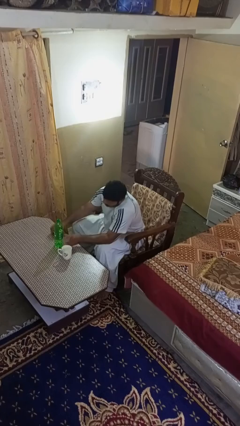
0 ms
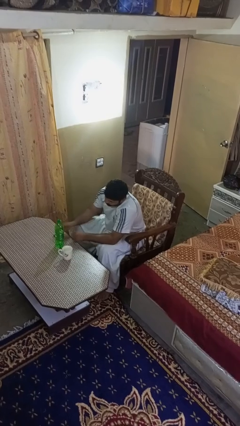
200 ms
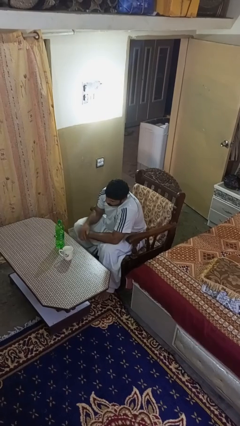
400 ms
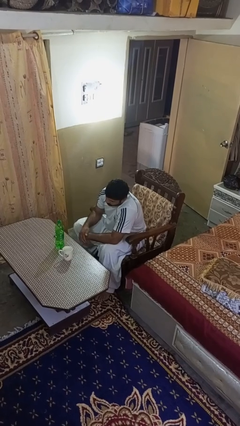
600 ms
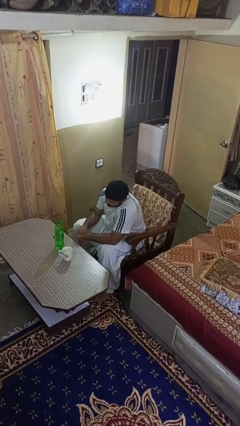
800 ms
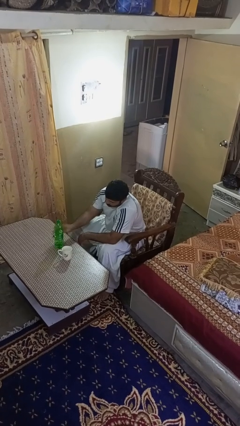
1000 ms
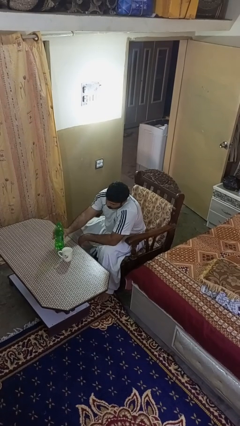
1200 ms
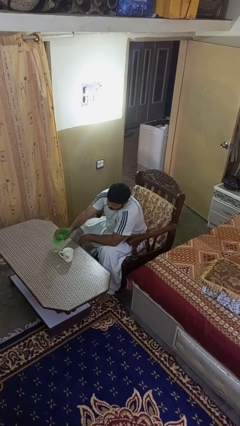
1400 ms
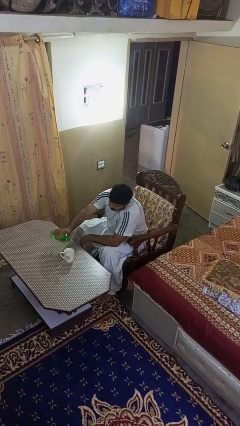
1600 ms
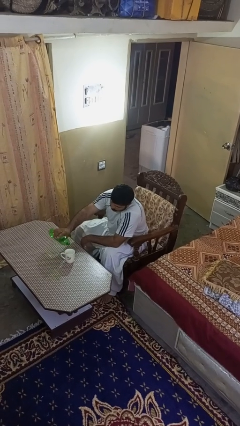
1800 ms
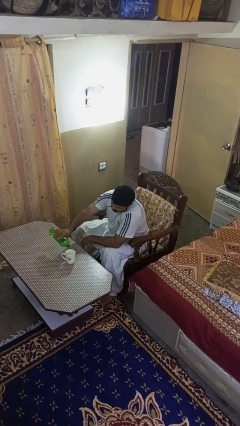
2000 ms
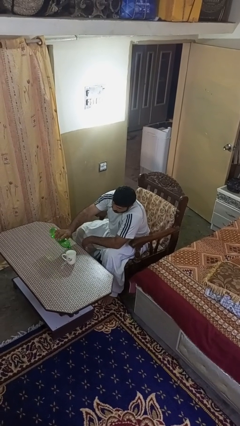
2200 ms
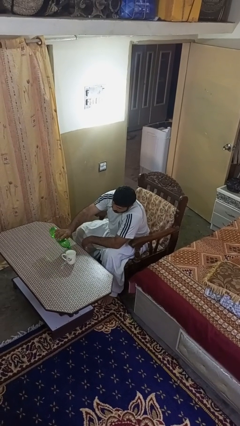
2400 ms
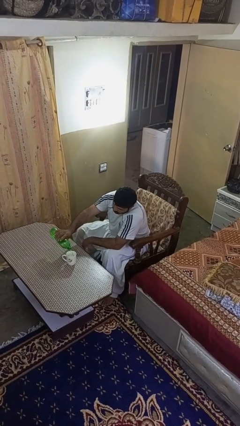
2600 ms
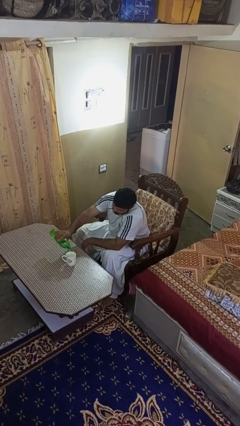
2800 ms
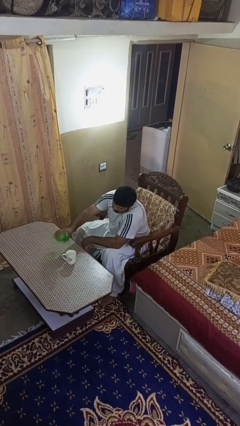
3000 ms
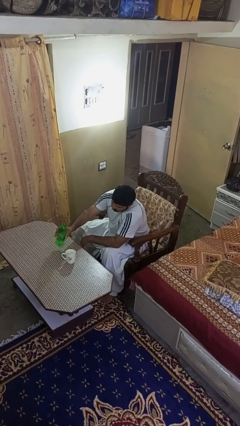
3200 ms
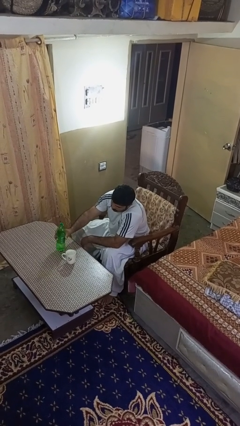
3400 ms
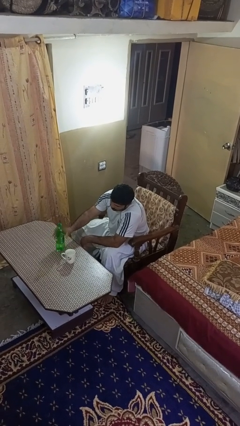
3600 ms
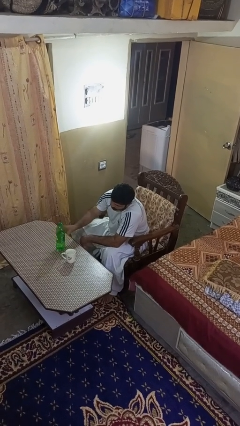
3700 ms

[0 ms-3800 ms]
person pours liquid into cup

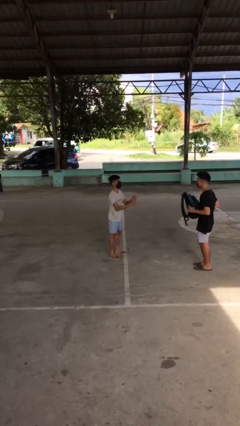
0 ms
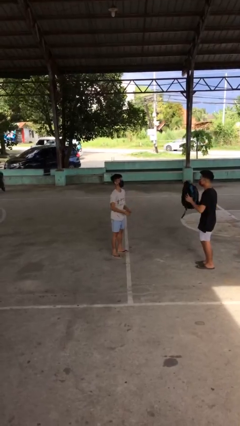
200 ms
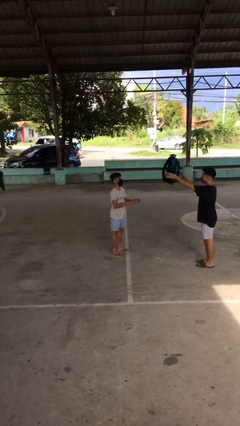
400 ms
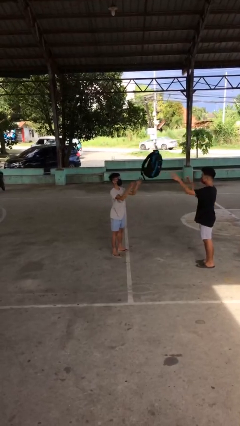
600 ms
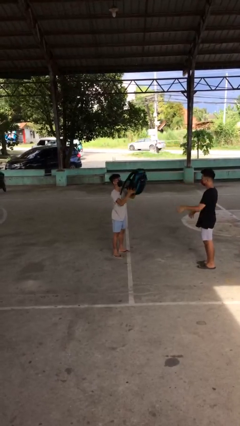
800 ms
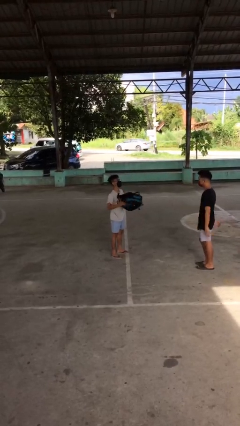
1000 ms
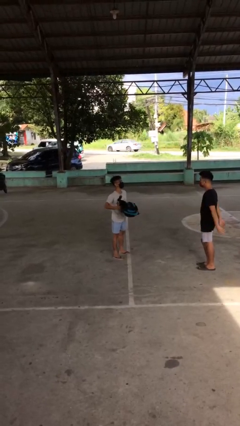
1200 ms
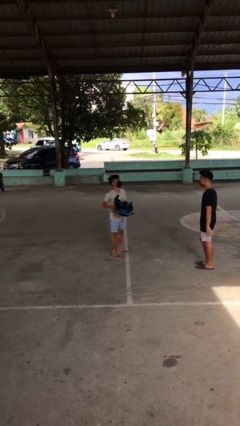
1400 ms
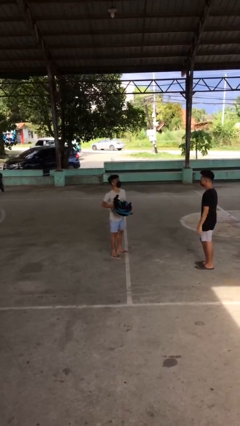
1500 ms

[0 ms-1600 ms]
person catches object from person

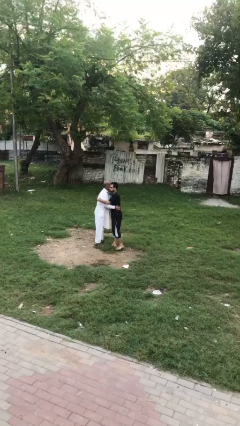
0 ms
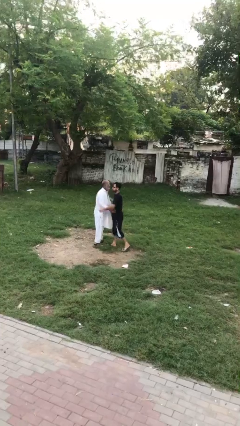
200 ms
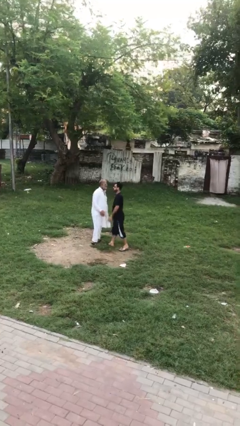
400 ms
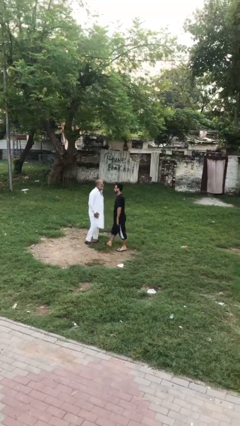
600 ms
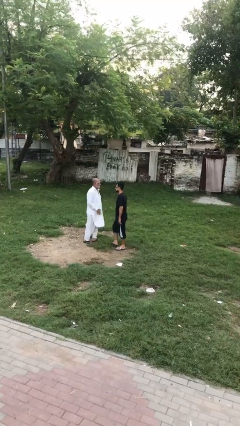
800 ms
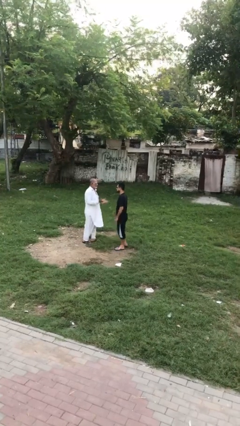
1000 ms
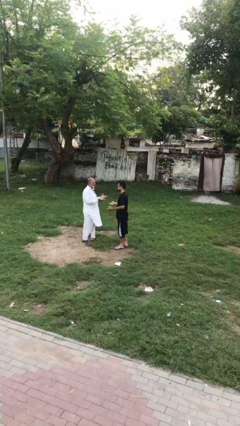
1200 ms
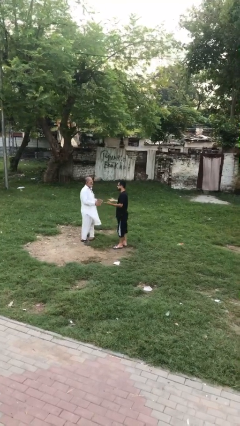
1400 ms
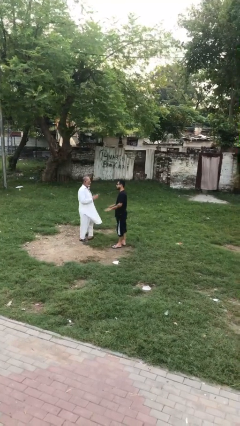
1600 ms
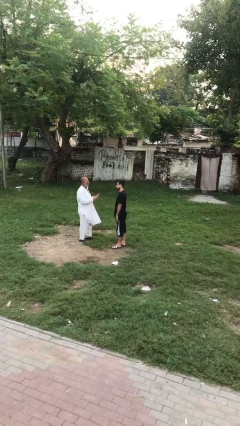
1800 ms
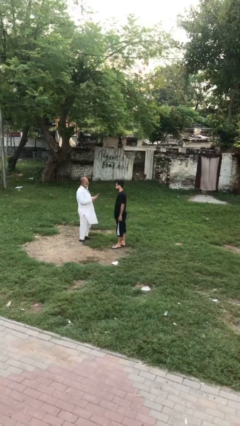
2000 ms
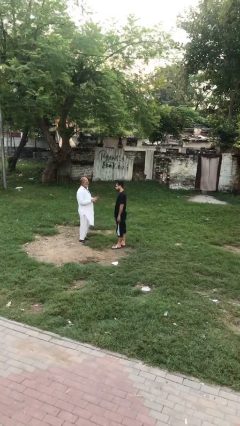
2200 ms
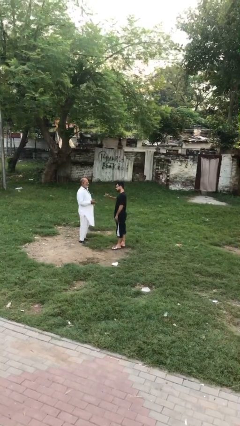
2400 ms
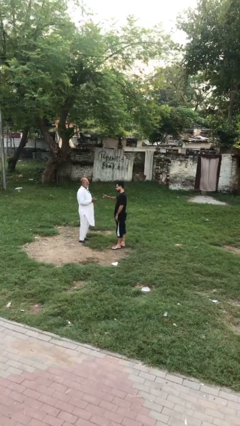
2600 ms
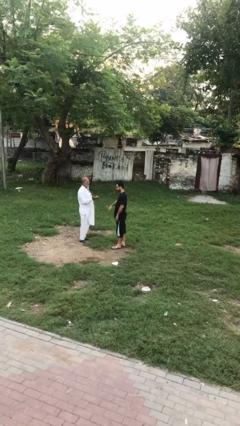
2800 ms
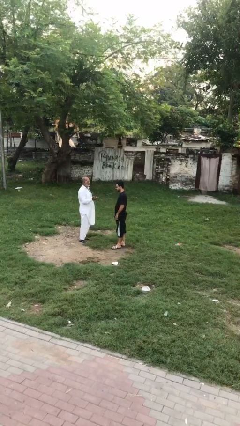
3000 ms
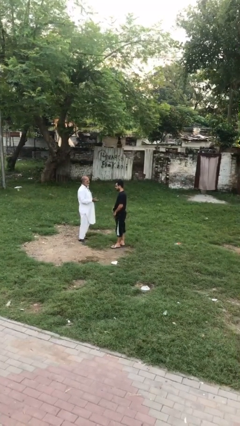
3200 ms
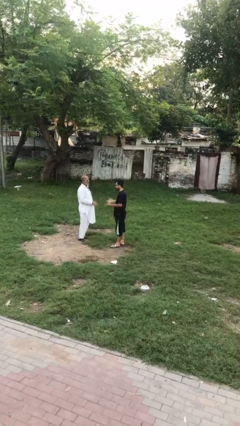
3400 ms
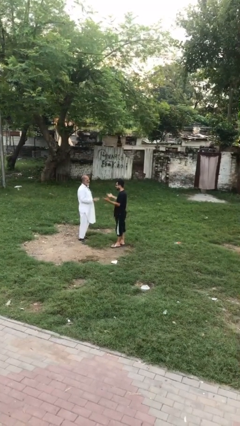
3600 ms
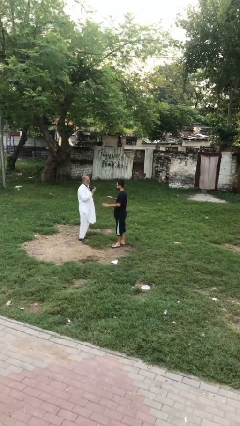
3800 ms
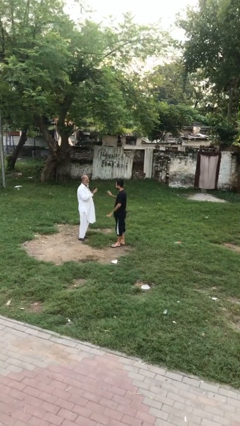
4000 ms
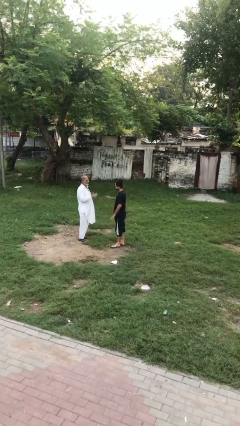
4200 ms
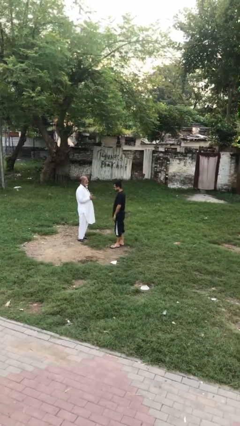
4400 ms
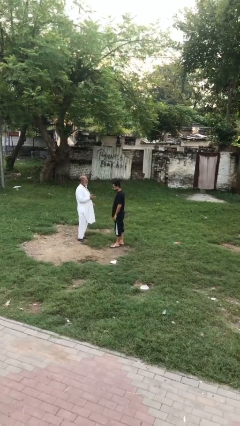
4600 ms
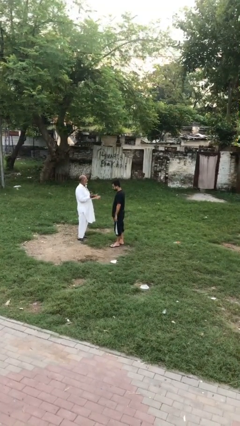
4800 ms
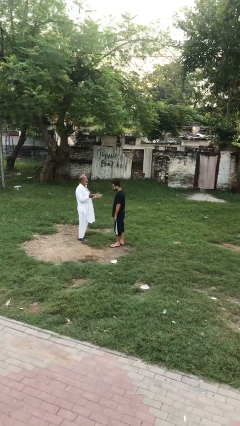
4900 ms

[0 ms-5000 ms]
person talks to person

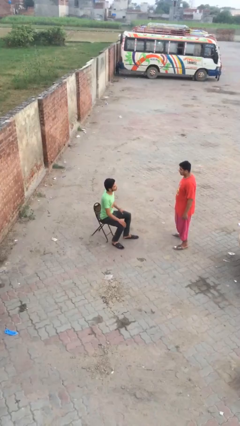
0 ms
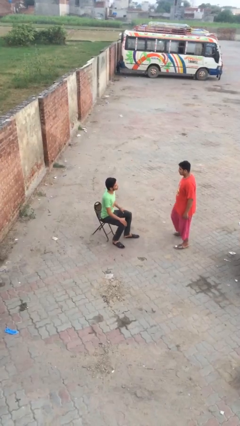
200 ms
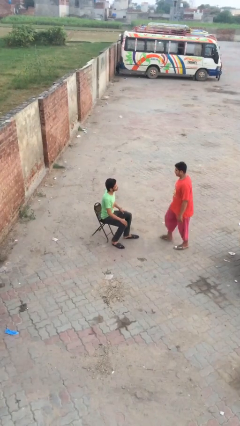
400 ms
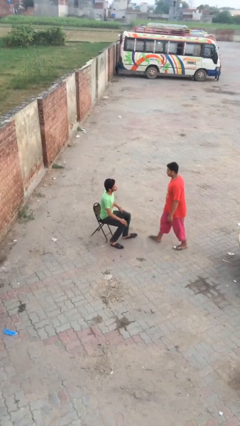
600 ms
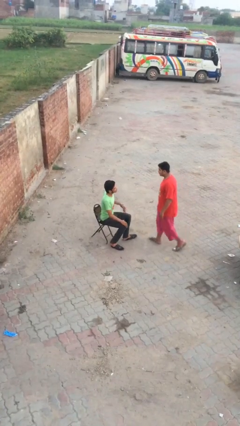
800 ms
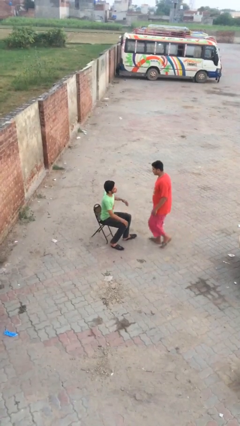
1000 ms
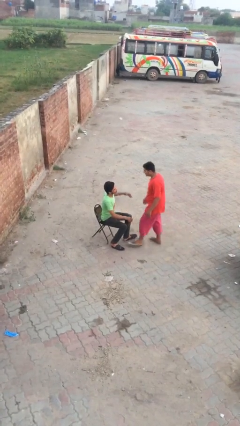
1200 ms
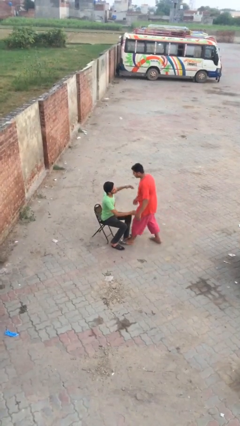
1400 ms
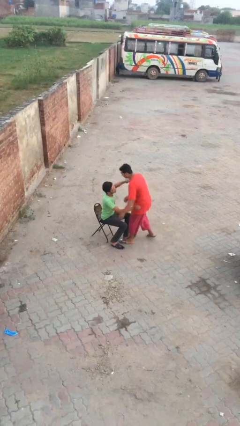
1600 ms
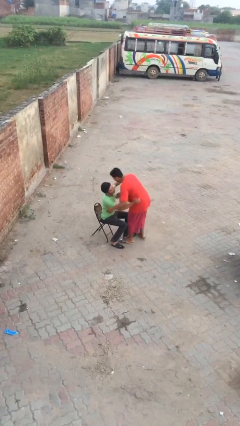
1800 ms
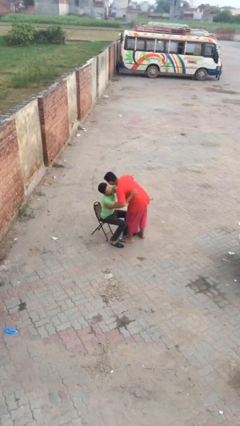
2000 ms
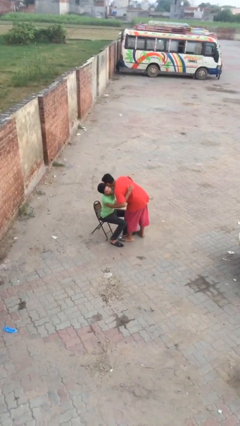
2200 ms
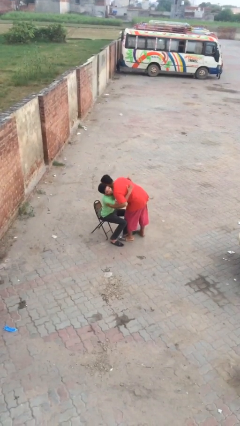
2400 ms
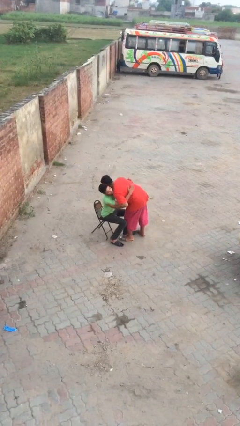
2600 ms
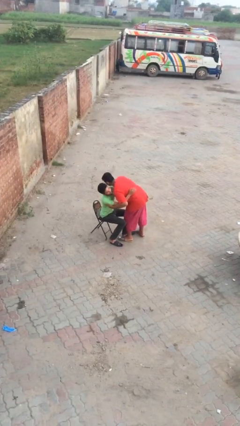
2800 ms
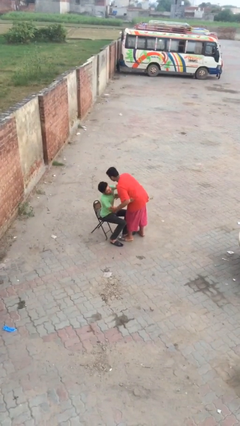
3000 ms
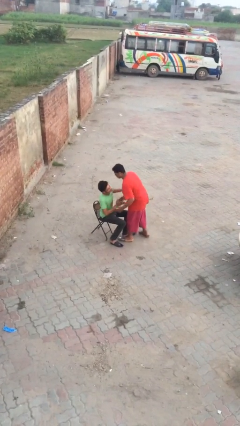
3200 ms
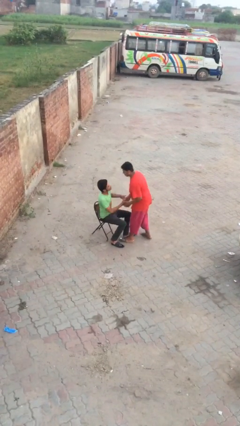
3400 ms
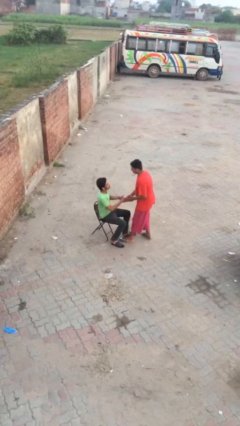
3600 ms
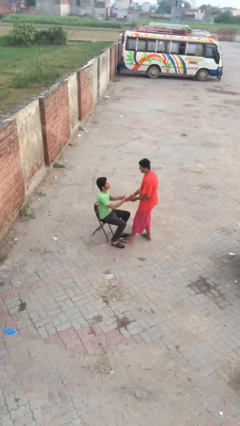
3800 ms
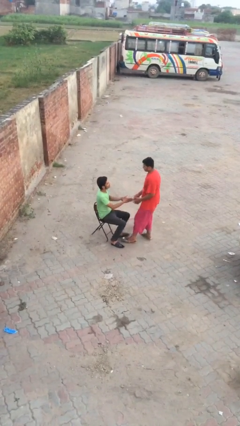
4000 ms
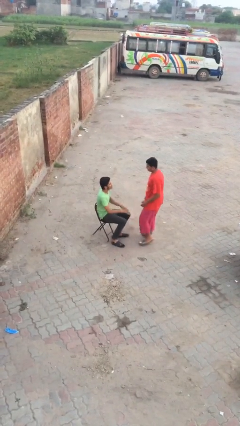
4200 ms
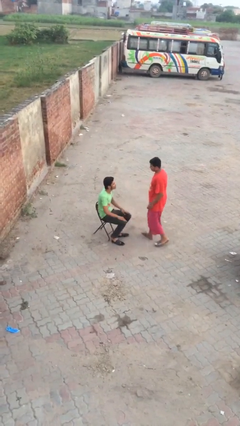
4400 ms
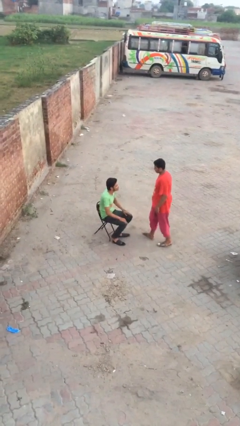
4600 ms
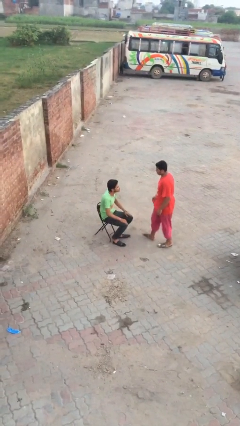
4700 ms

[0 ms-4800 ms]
person embraces person

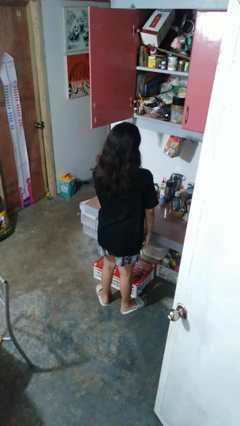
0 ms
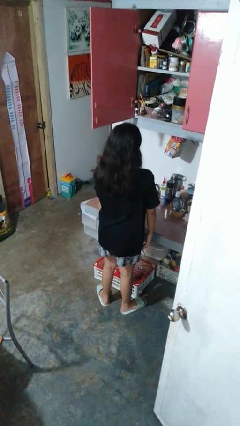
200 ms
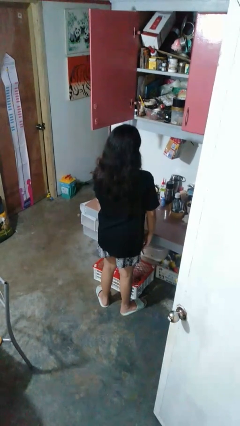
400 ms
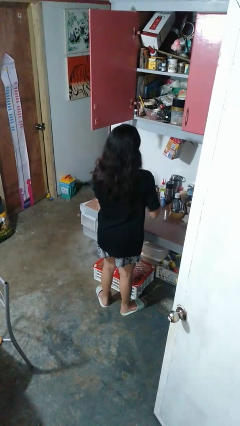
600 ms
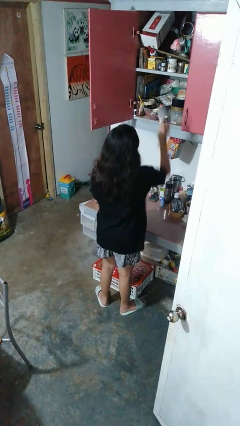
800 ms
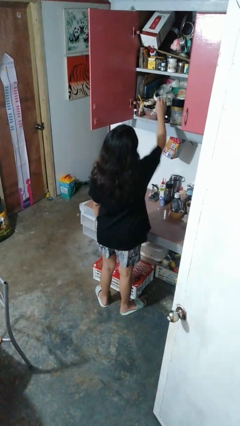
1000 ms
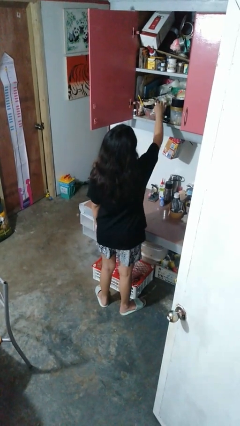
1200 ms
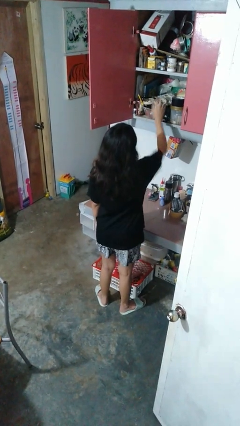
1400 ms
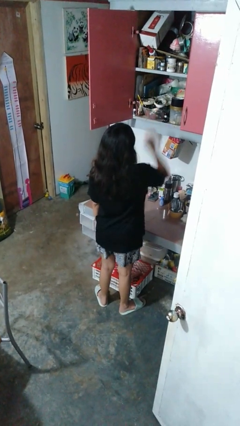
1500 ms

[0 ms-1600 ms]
person puts object in cabinet

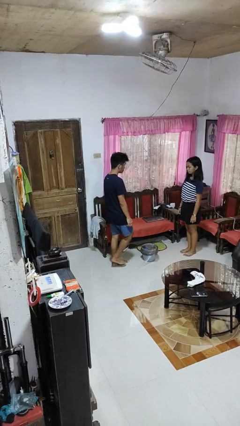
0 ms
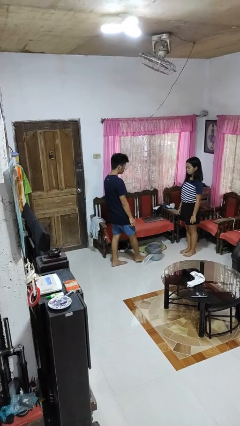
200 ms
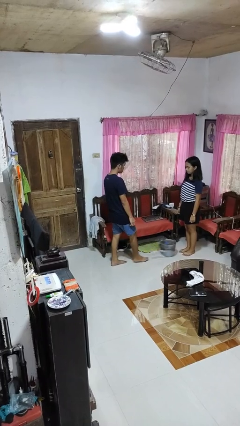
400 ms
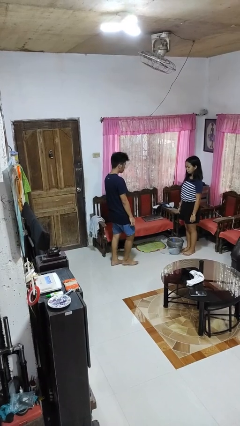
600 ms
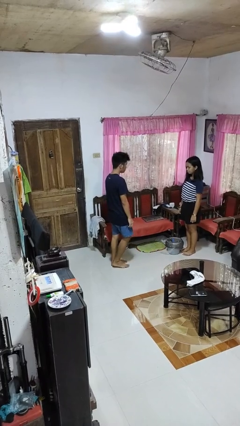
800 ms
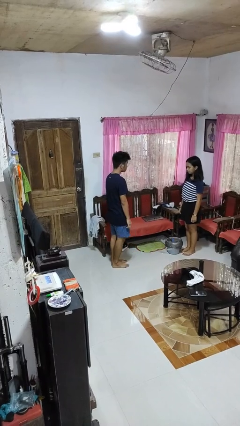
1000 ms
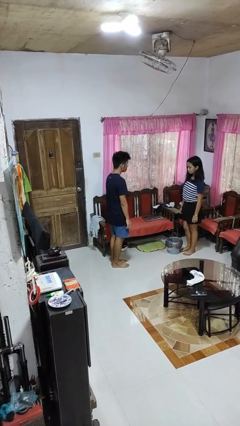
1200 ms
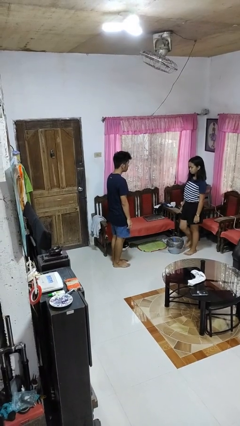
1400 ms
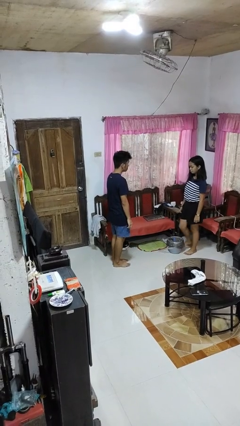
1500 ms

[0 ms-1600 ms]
person kicks object to person
